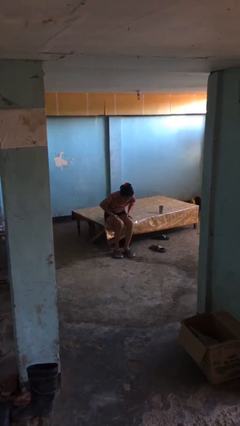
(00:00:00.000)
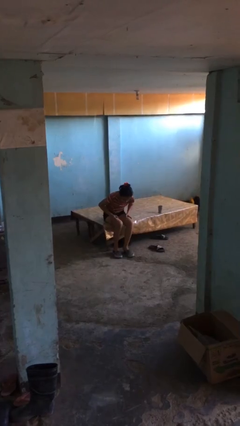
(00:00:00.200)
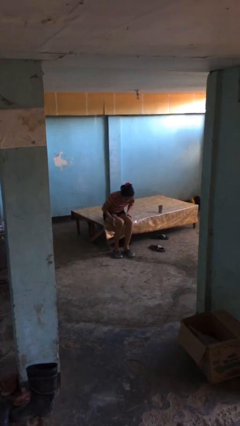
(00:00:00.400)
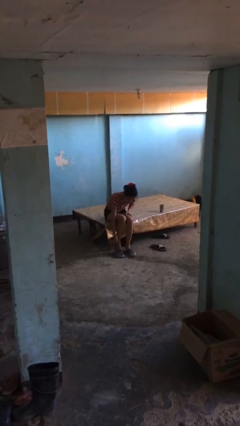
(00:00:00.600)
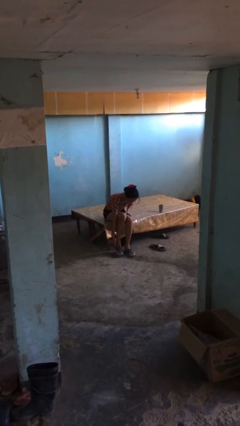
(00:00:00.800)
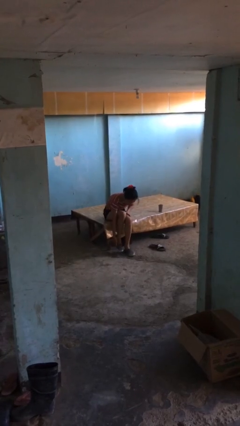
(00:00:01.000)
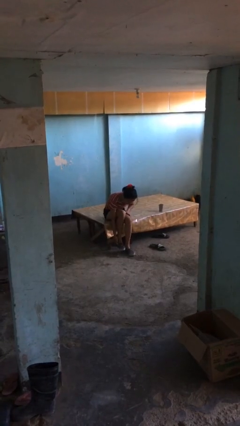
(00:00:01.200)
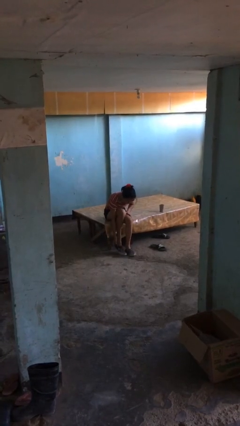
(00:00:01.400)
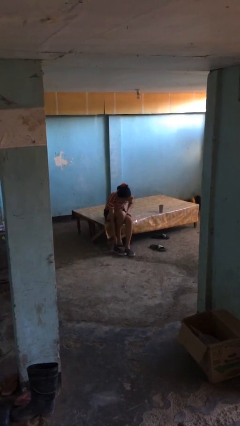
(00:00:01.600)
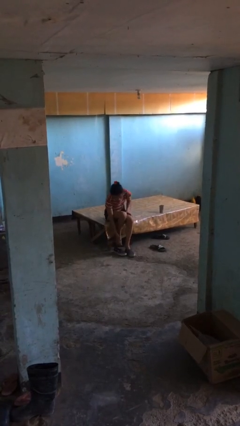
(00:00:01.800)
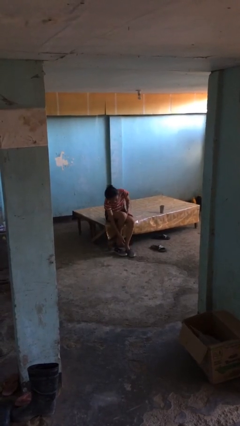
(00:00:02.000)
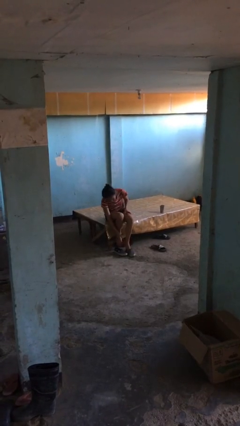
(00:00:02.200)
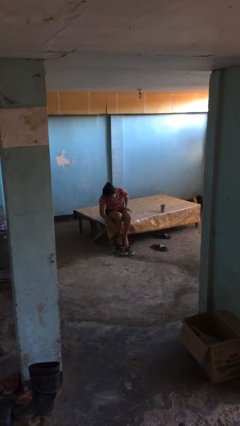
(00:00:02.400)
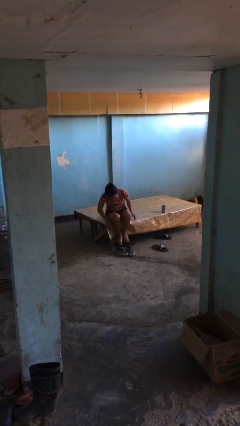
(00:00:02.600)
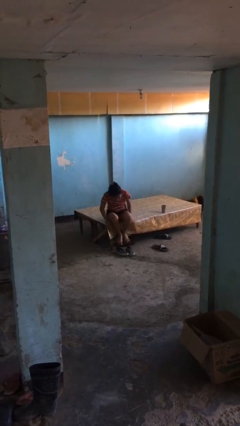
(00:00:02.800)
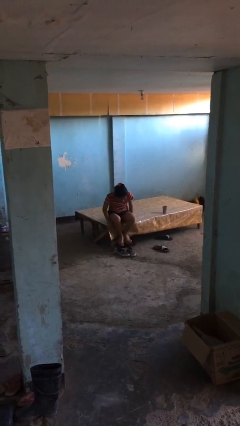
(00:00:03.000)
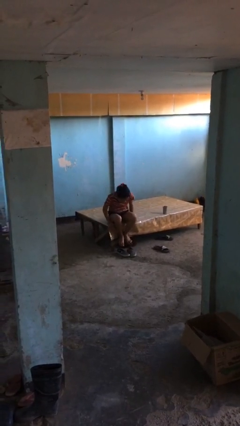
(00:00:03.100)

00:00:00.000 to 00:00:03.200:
person takes off shoes

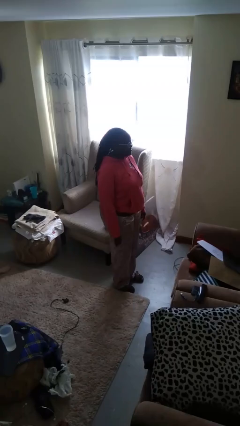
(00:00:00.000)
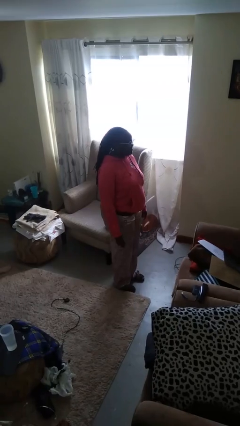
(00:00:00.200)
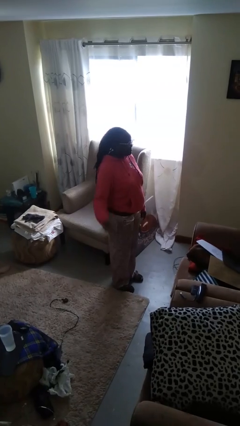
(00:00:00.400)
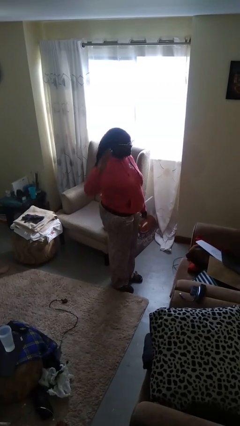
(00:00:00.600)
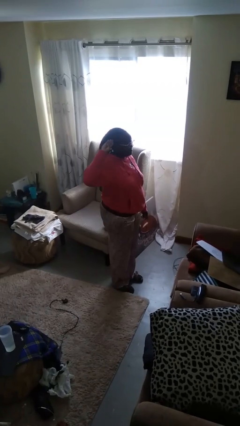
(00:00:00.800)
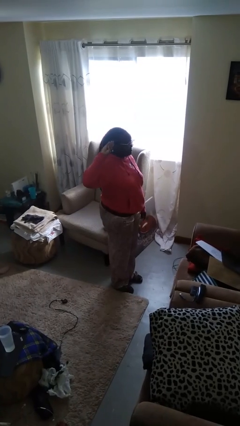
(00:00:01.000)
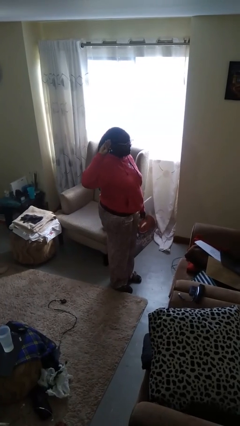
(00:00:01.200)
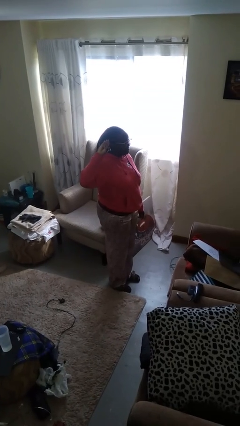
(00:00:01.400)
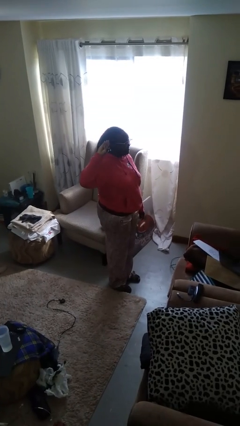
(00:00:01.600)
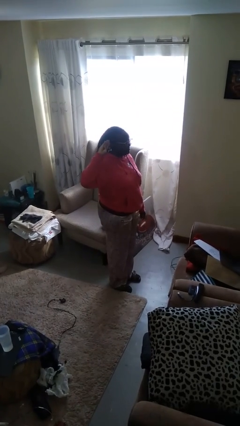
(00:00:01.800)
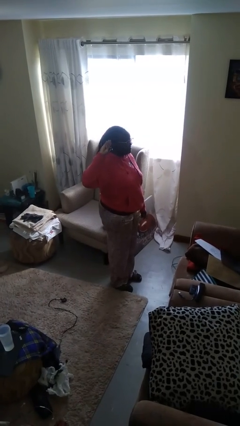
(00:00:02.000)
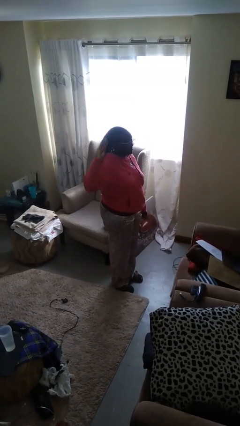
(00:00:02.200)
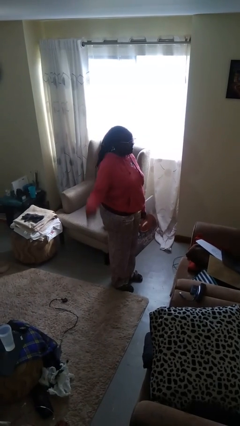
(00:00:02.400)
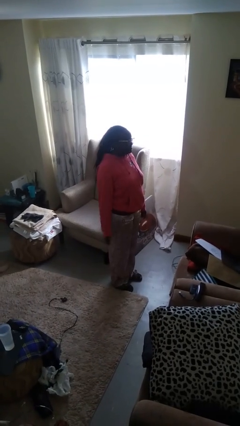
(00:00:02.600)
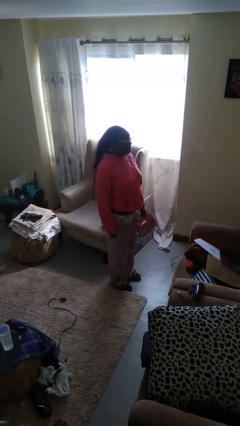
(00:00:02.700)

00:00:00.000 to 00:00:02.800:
person salutes

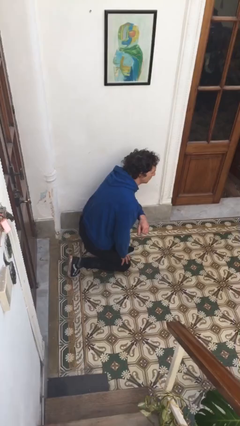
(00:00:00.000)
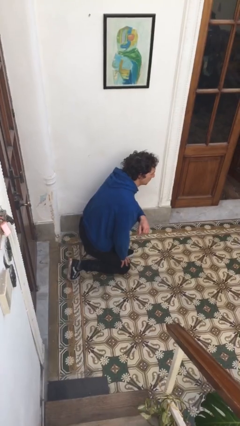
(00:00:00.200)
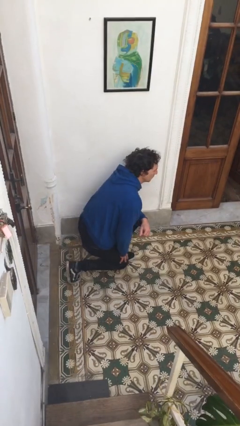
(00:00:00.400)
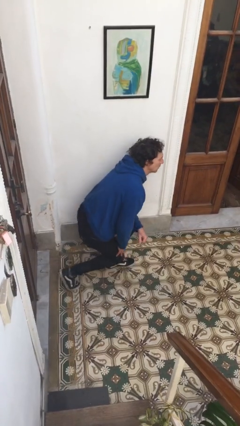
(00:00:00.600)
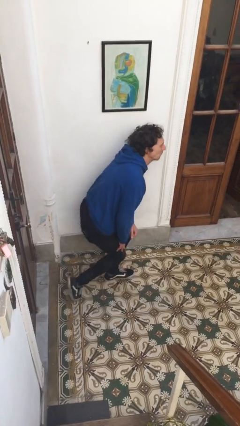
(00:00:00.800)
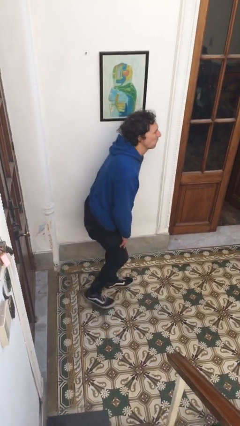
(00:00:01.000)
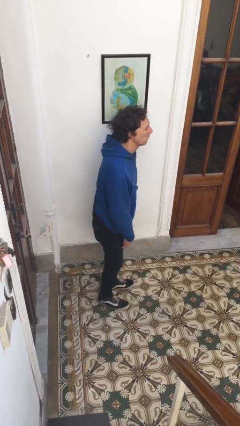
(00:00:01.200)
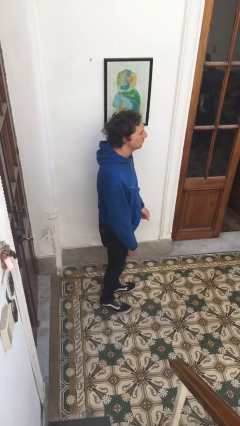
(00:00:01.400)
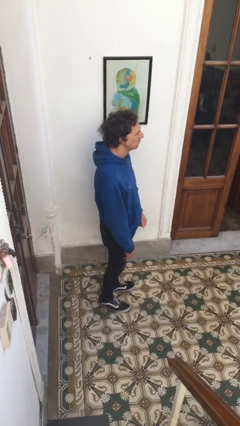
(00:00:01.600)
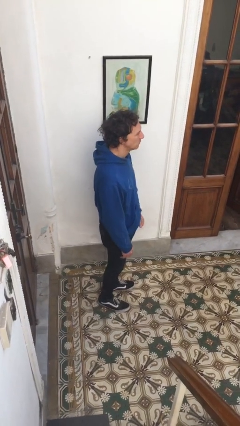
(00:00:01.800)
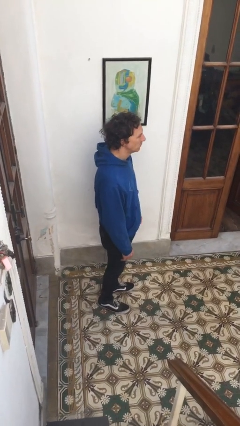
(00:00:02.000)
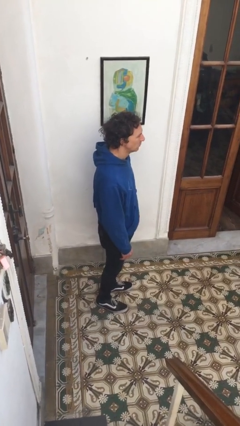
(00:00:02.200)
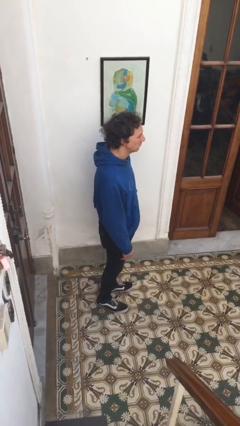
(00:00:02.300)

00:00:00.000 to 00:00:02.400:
person stands up from floor

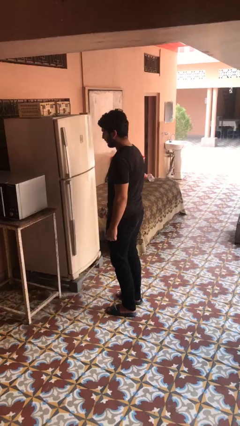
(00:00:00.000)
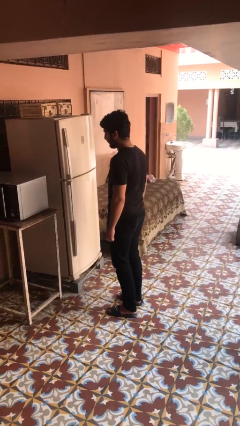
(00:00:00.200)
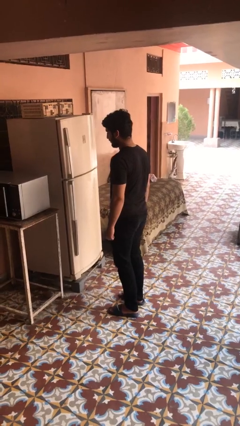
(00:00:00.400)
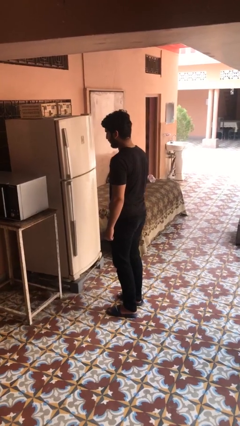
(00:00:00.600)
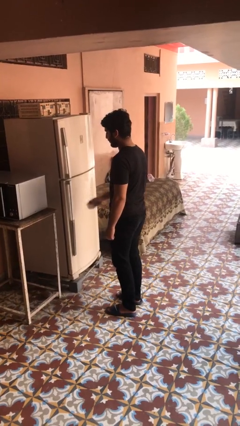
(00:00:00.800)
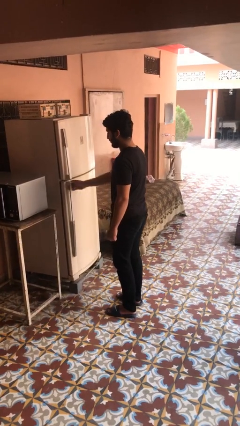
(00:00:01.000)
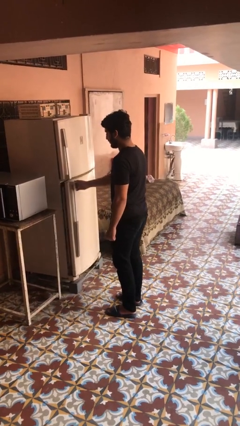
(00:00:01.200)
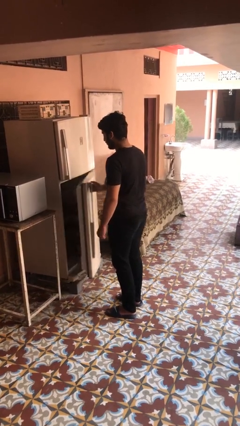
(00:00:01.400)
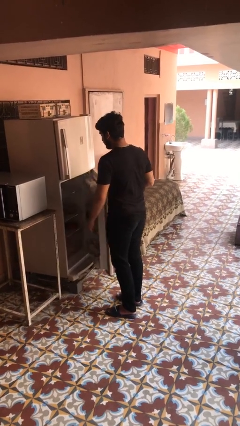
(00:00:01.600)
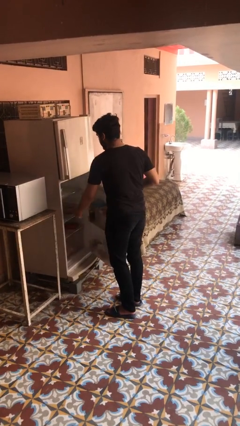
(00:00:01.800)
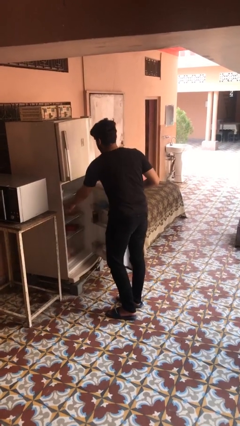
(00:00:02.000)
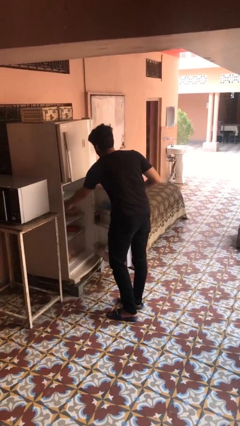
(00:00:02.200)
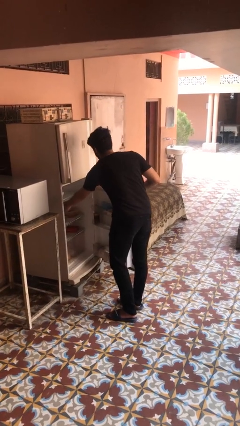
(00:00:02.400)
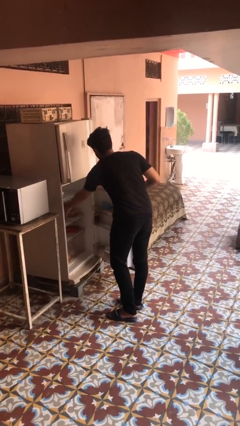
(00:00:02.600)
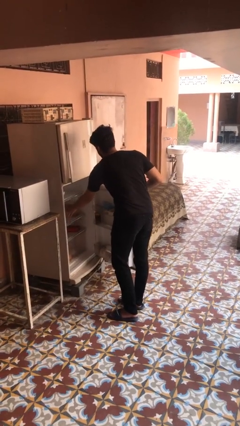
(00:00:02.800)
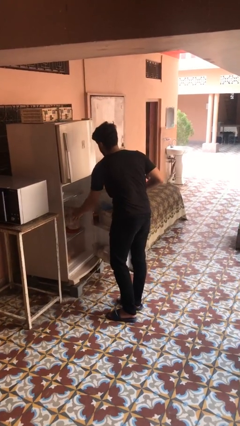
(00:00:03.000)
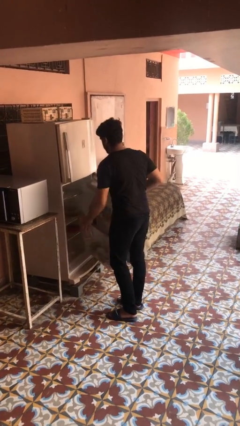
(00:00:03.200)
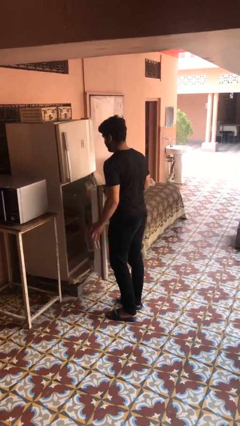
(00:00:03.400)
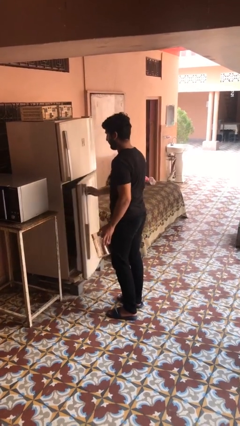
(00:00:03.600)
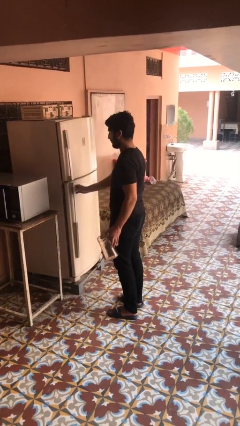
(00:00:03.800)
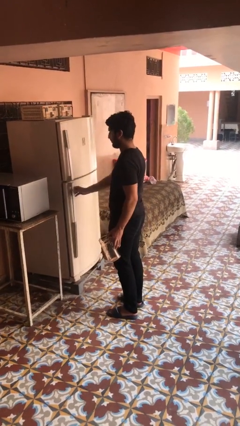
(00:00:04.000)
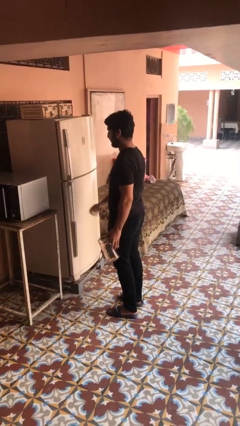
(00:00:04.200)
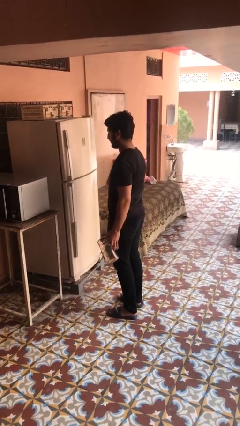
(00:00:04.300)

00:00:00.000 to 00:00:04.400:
person takes object from refrigerator

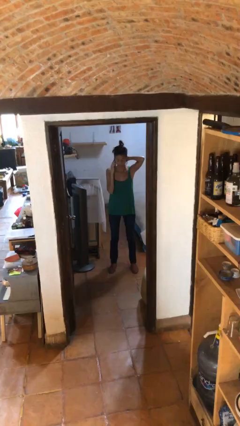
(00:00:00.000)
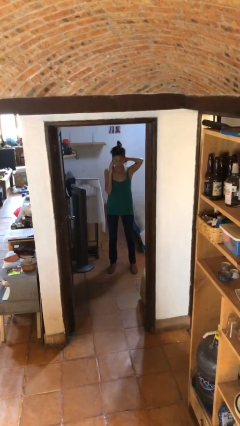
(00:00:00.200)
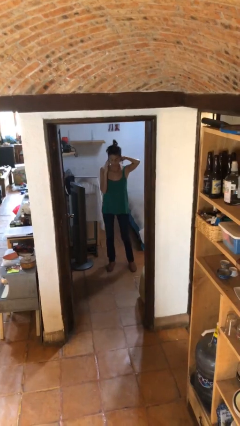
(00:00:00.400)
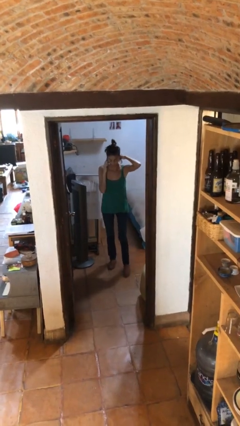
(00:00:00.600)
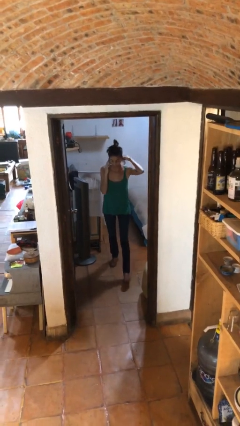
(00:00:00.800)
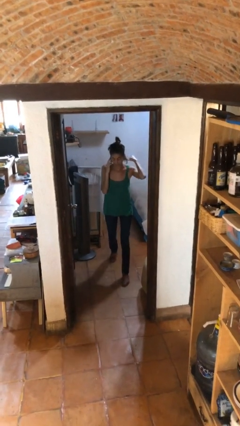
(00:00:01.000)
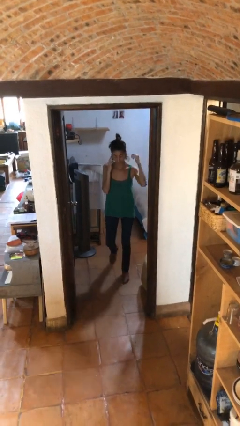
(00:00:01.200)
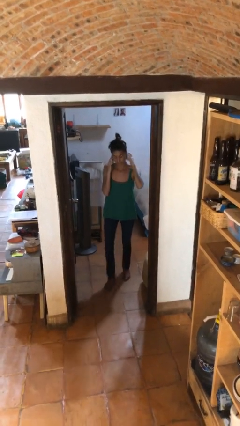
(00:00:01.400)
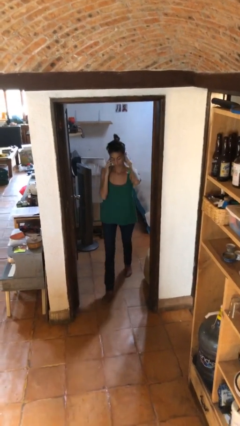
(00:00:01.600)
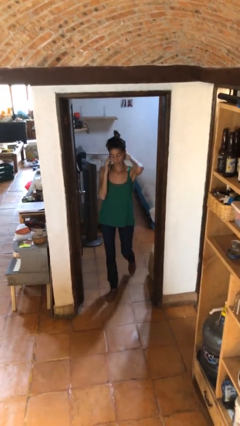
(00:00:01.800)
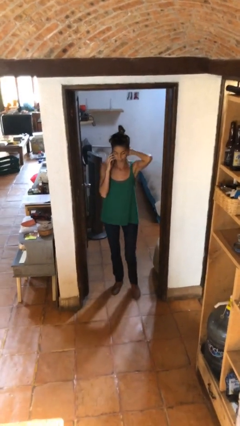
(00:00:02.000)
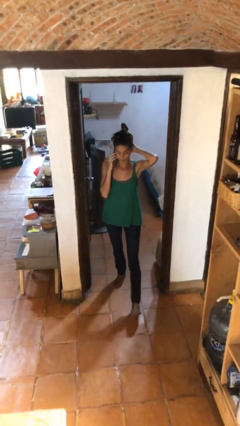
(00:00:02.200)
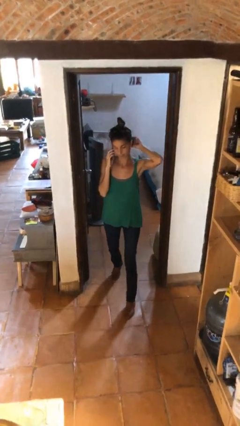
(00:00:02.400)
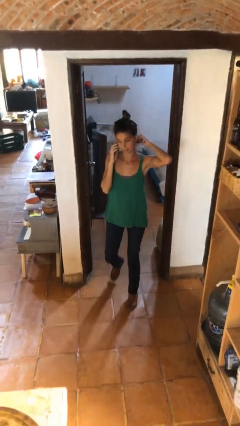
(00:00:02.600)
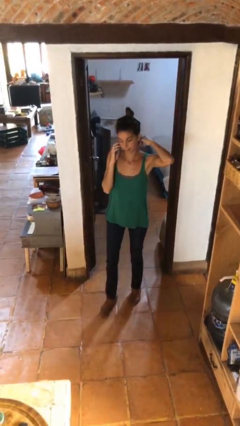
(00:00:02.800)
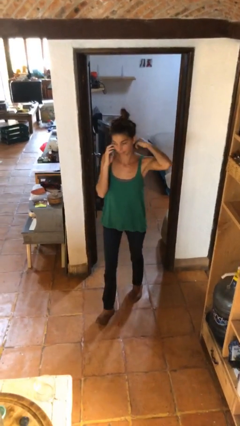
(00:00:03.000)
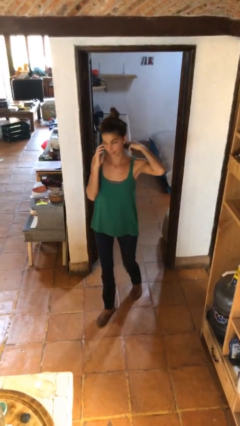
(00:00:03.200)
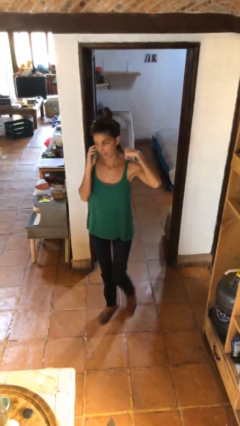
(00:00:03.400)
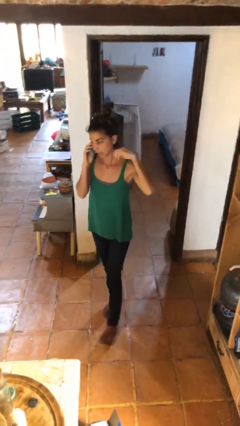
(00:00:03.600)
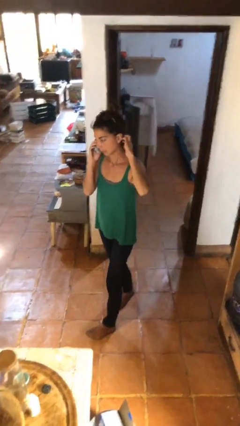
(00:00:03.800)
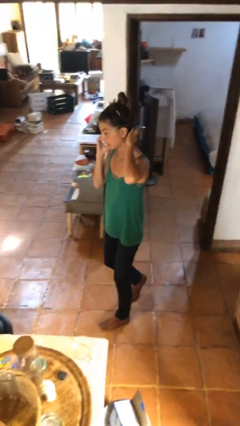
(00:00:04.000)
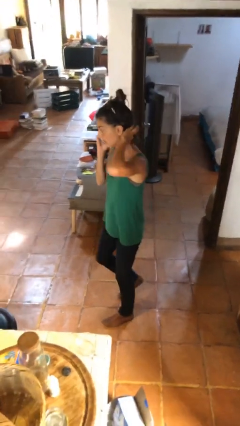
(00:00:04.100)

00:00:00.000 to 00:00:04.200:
person enters scene through structure
